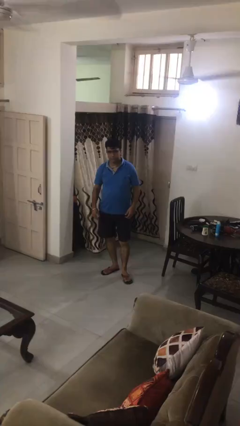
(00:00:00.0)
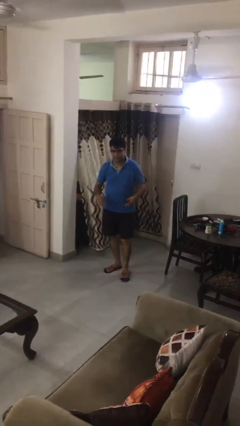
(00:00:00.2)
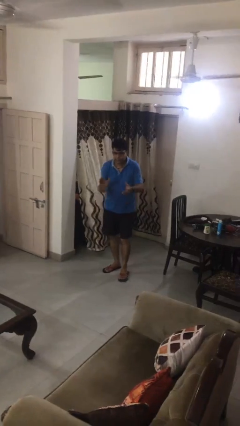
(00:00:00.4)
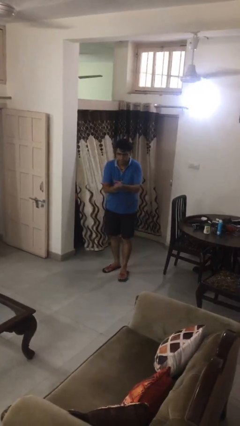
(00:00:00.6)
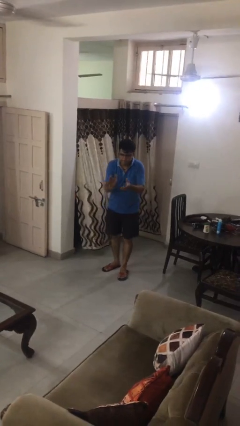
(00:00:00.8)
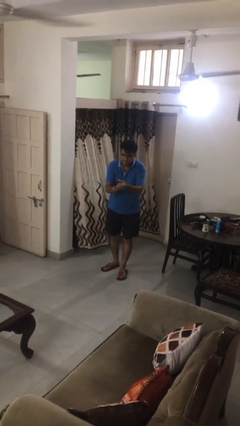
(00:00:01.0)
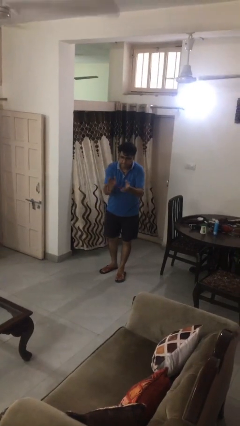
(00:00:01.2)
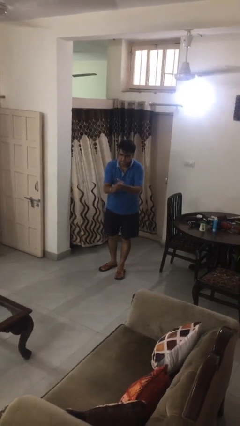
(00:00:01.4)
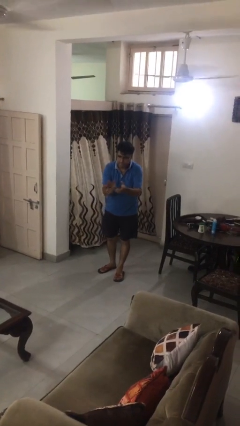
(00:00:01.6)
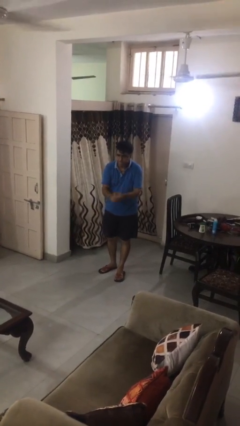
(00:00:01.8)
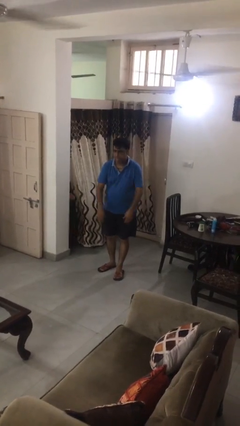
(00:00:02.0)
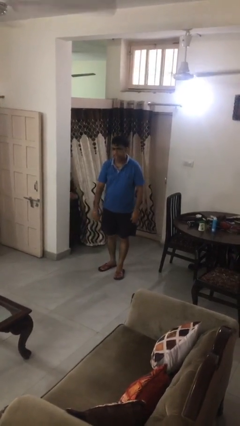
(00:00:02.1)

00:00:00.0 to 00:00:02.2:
person claps hands

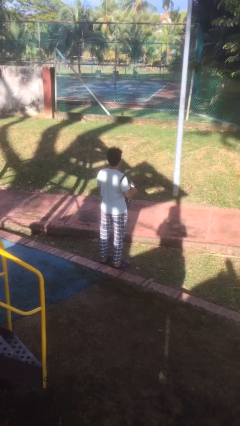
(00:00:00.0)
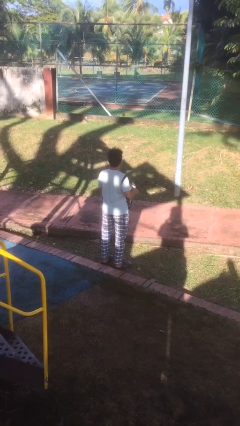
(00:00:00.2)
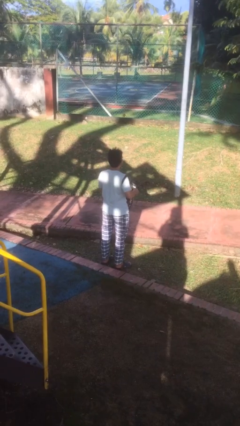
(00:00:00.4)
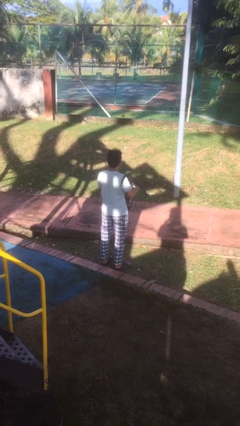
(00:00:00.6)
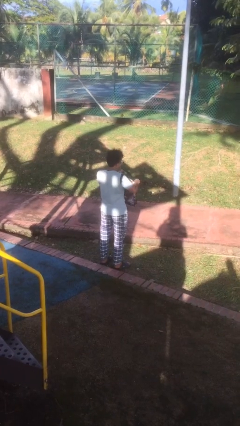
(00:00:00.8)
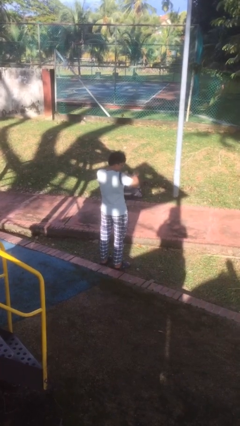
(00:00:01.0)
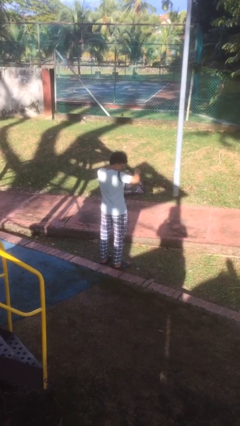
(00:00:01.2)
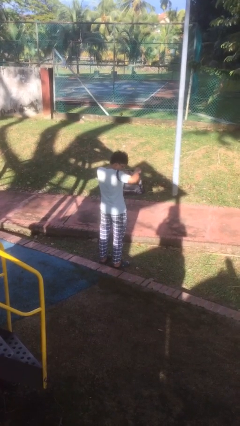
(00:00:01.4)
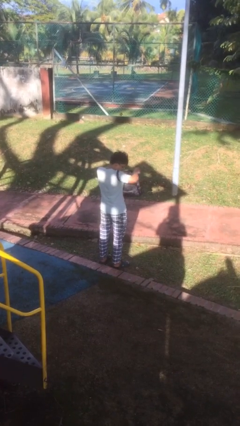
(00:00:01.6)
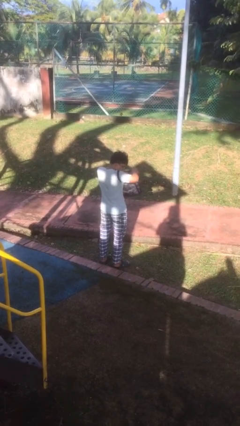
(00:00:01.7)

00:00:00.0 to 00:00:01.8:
person searches in bag

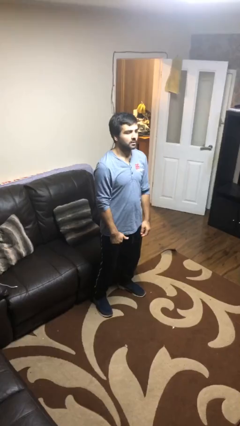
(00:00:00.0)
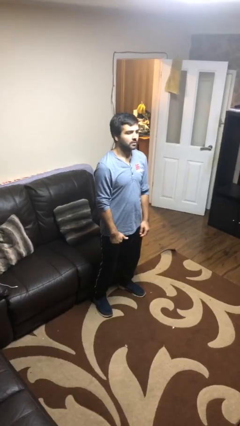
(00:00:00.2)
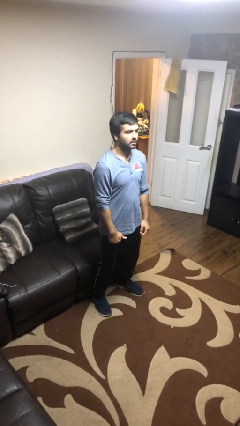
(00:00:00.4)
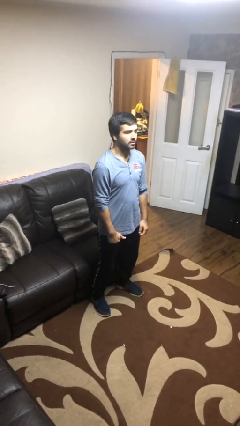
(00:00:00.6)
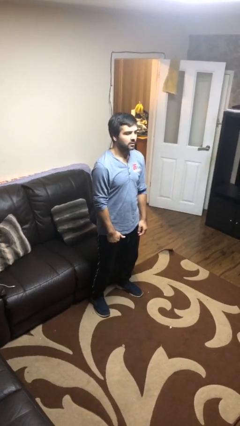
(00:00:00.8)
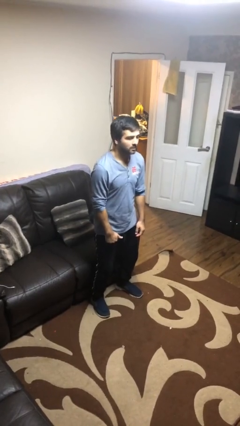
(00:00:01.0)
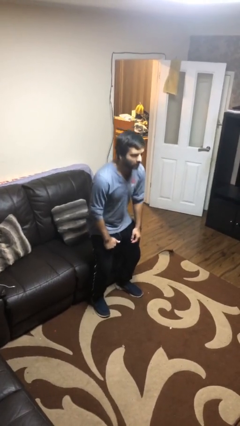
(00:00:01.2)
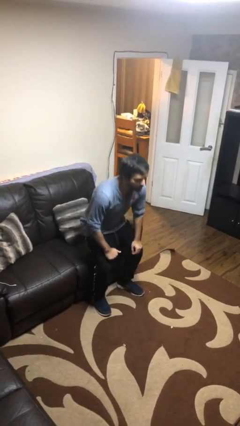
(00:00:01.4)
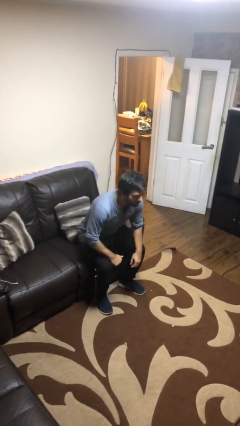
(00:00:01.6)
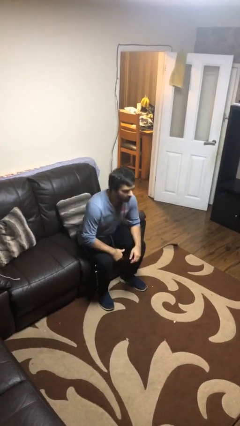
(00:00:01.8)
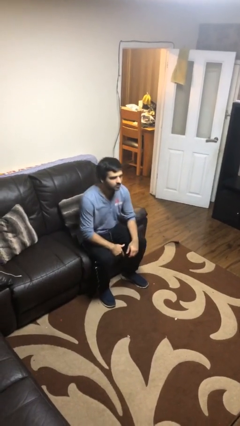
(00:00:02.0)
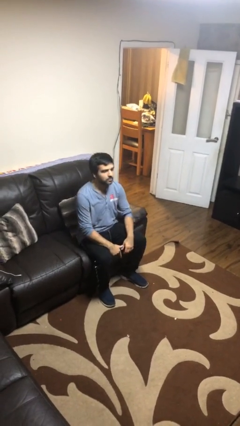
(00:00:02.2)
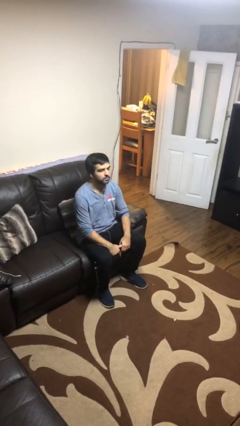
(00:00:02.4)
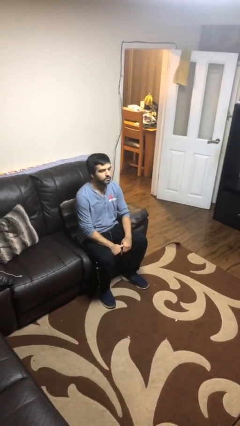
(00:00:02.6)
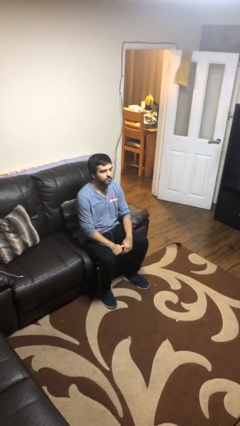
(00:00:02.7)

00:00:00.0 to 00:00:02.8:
person sits down

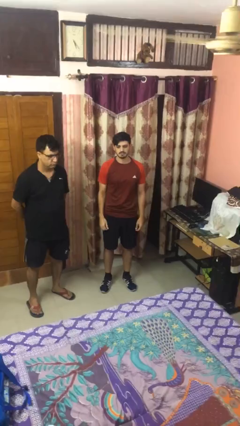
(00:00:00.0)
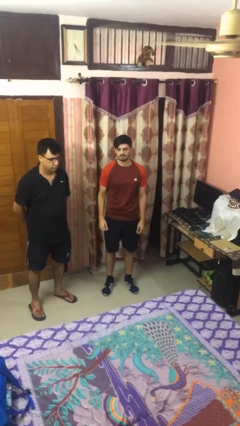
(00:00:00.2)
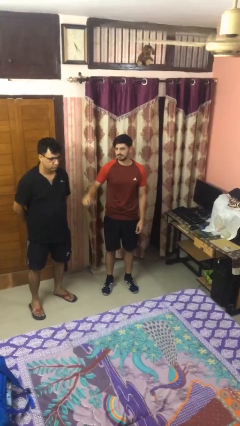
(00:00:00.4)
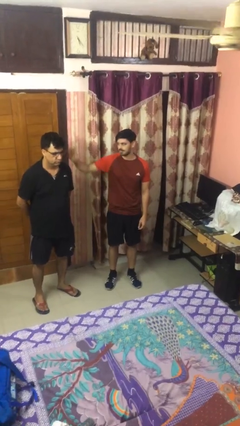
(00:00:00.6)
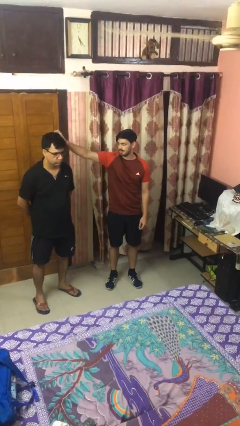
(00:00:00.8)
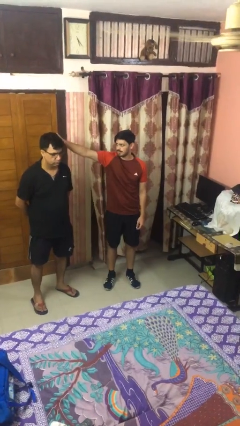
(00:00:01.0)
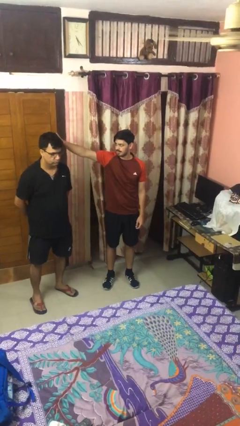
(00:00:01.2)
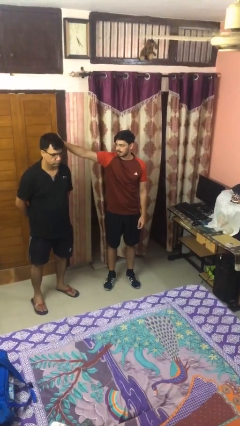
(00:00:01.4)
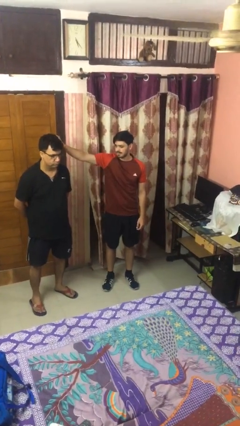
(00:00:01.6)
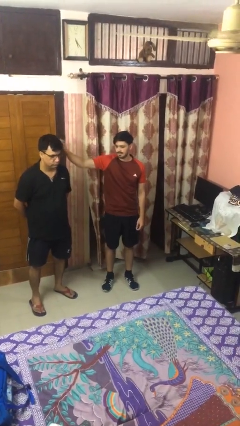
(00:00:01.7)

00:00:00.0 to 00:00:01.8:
person grabs person by hair

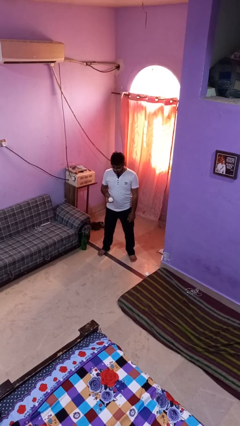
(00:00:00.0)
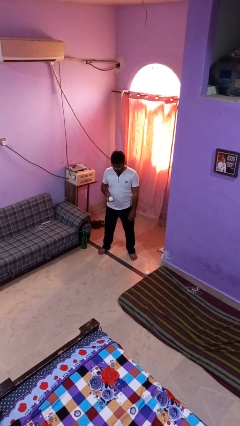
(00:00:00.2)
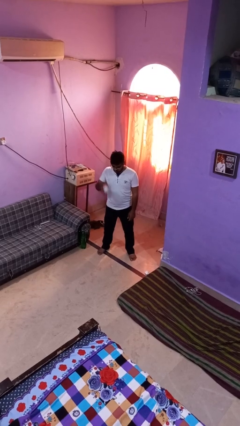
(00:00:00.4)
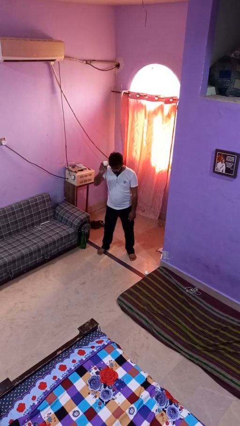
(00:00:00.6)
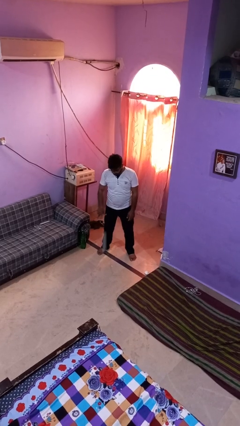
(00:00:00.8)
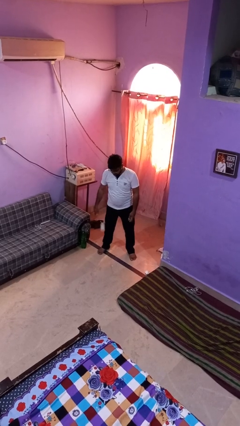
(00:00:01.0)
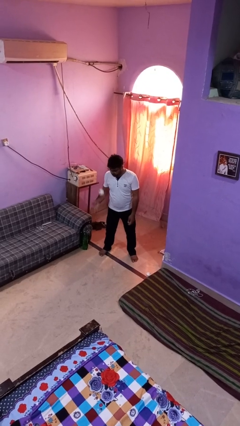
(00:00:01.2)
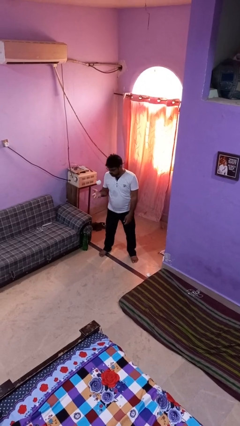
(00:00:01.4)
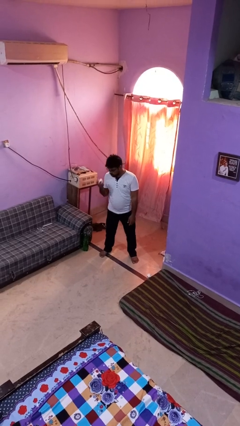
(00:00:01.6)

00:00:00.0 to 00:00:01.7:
person bounces ball on floor

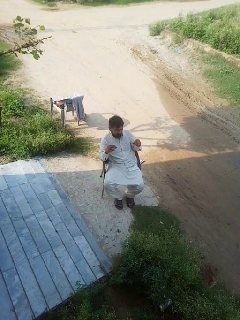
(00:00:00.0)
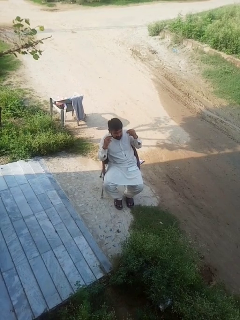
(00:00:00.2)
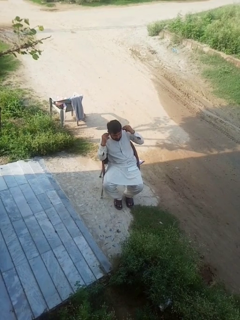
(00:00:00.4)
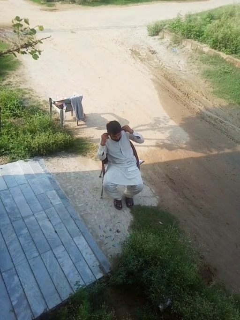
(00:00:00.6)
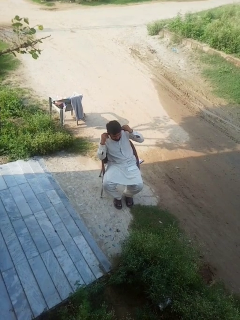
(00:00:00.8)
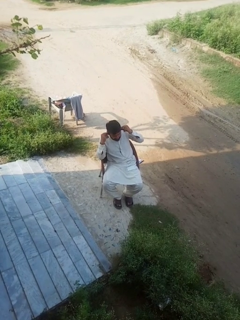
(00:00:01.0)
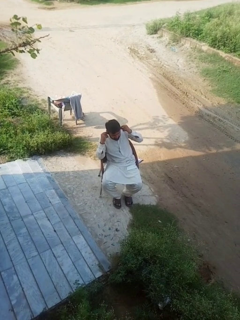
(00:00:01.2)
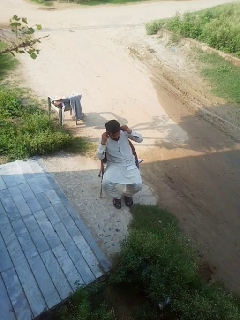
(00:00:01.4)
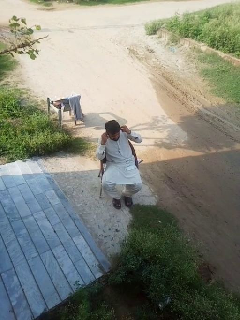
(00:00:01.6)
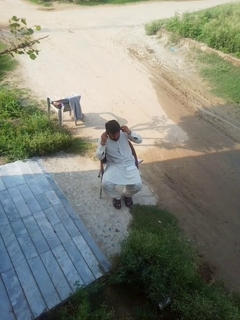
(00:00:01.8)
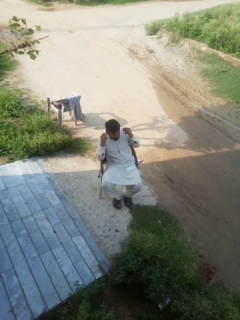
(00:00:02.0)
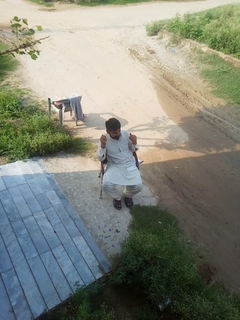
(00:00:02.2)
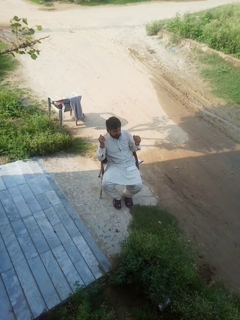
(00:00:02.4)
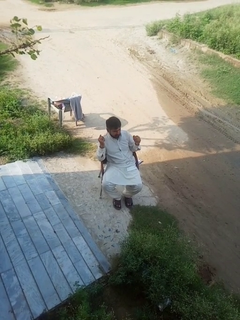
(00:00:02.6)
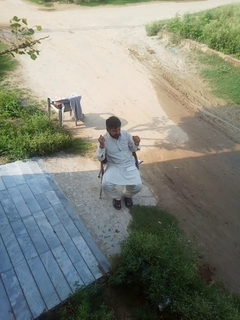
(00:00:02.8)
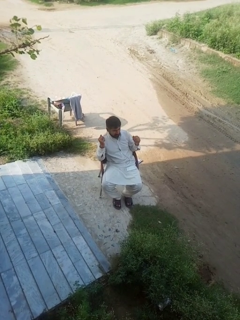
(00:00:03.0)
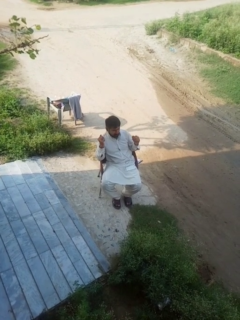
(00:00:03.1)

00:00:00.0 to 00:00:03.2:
person puts on headphones

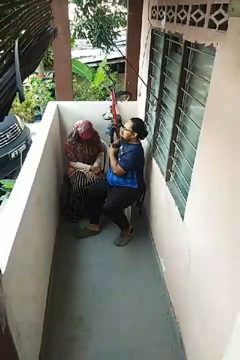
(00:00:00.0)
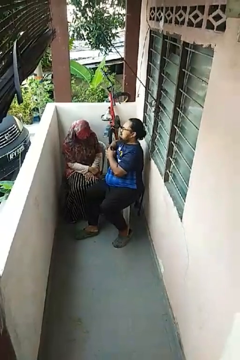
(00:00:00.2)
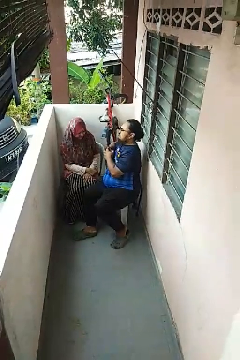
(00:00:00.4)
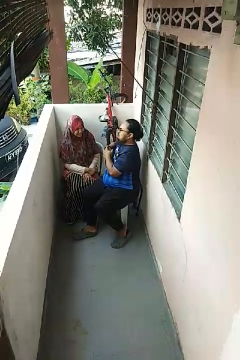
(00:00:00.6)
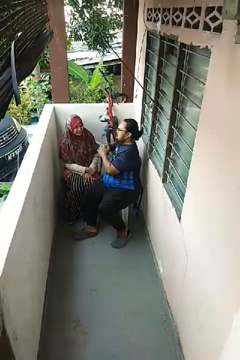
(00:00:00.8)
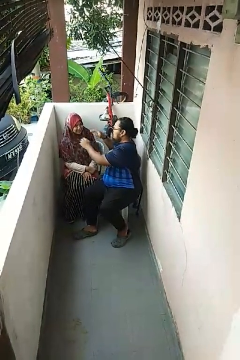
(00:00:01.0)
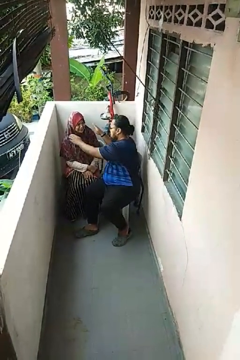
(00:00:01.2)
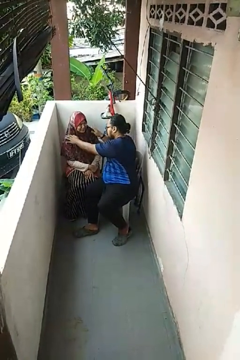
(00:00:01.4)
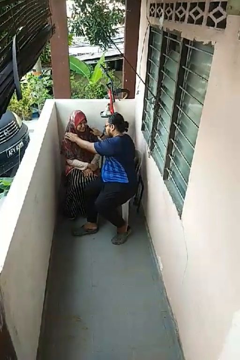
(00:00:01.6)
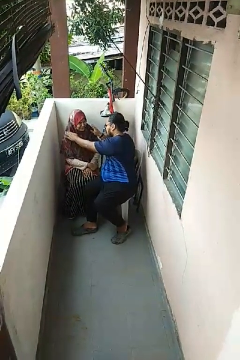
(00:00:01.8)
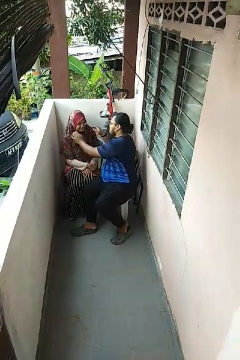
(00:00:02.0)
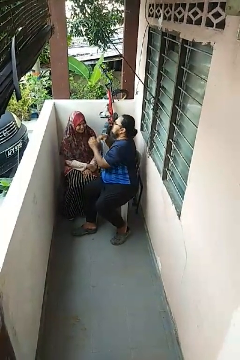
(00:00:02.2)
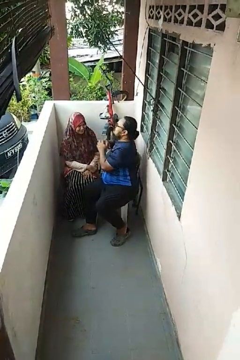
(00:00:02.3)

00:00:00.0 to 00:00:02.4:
person pounds shoulders of person

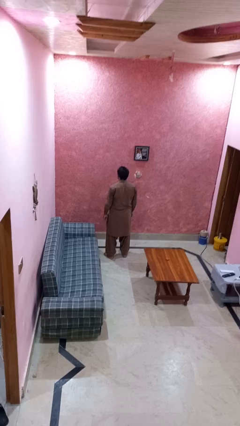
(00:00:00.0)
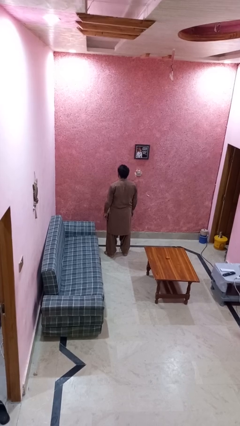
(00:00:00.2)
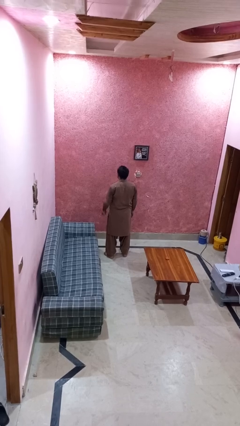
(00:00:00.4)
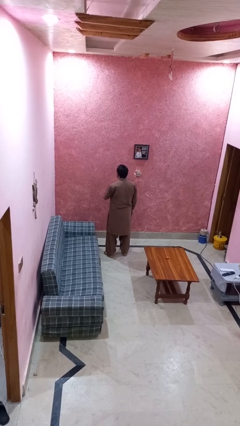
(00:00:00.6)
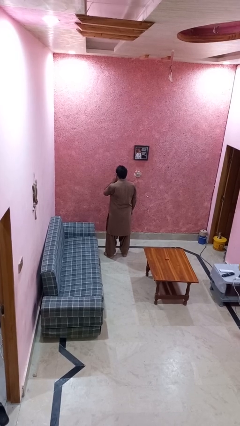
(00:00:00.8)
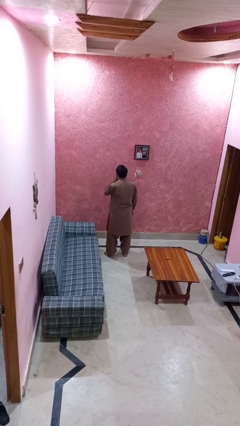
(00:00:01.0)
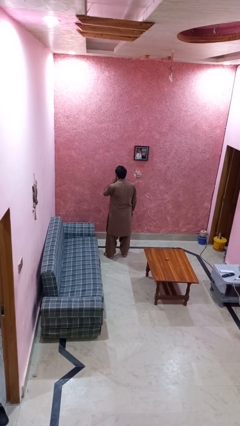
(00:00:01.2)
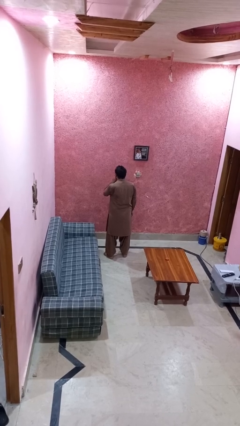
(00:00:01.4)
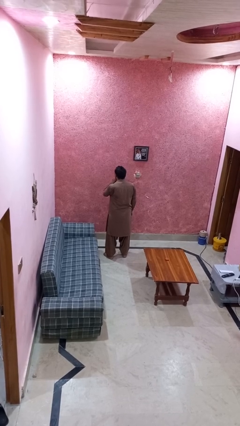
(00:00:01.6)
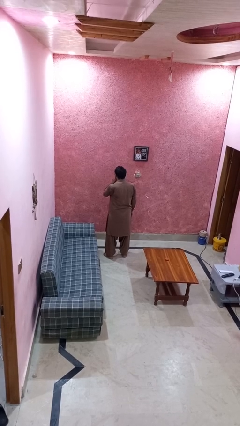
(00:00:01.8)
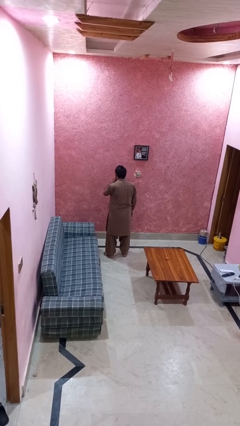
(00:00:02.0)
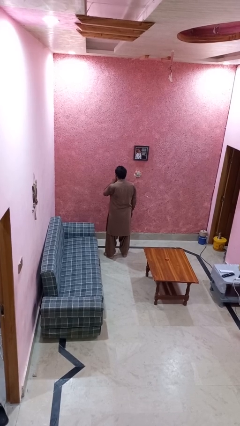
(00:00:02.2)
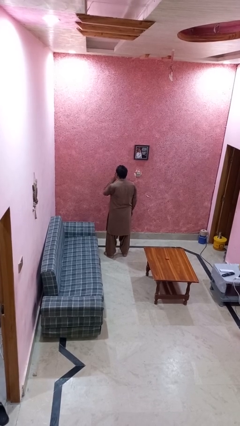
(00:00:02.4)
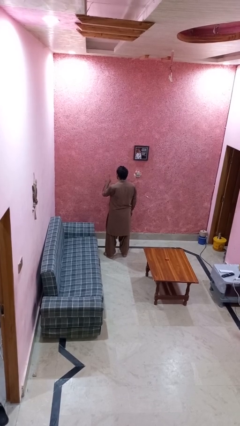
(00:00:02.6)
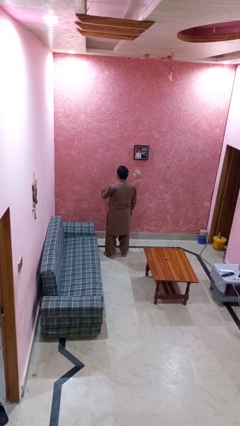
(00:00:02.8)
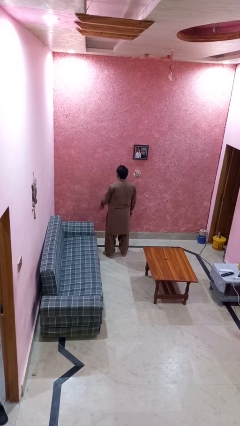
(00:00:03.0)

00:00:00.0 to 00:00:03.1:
person gestures be quiet
